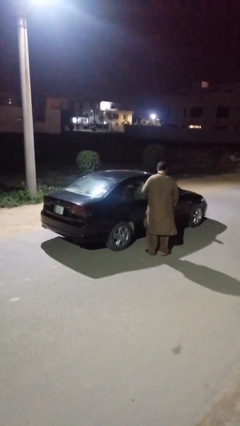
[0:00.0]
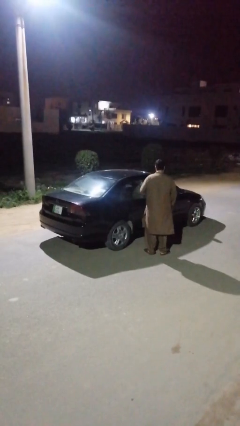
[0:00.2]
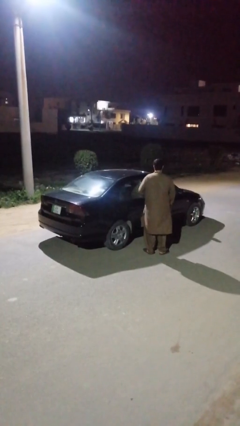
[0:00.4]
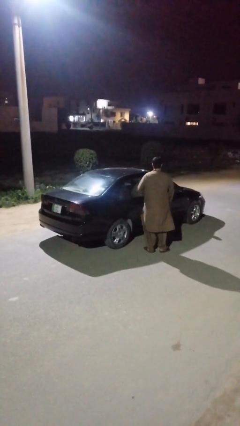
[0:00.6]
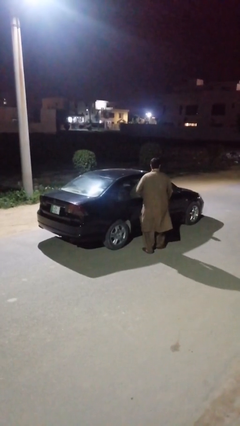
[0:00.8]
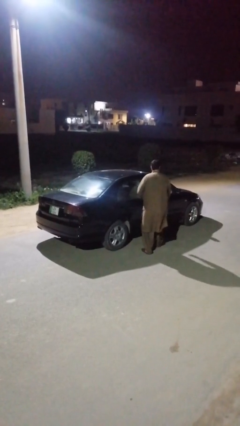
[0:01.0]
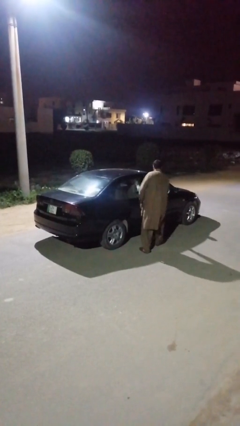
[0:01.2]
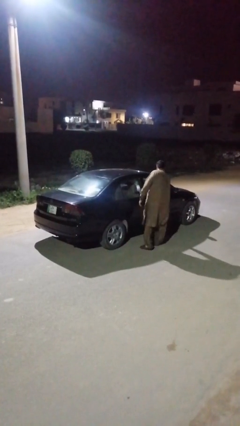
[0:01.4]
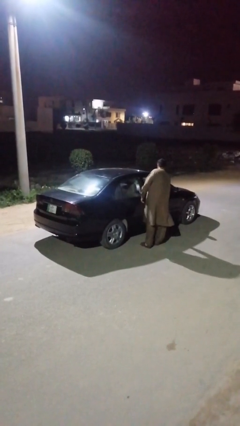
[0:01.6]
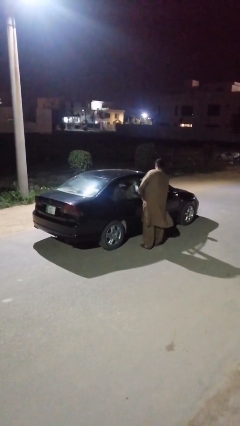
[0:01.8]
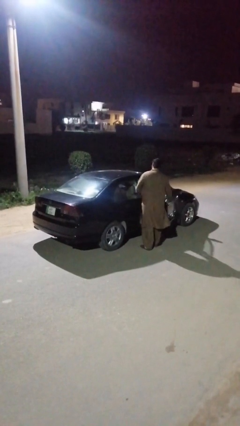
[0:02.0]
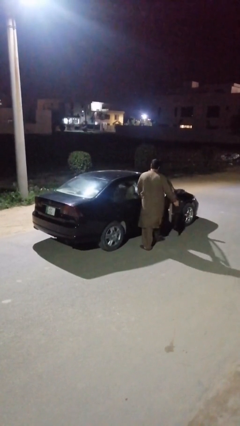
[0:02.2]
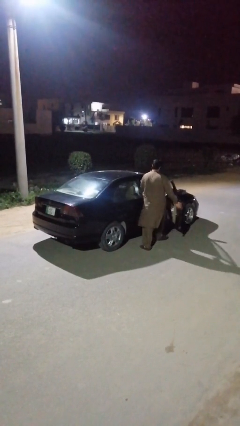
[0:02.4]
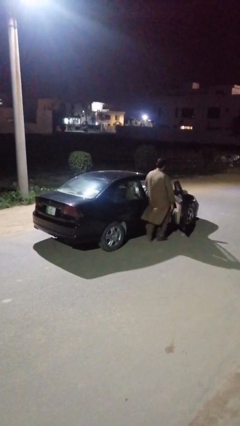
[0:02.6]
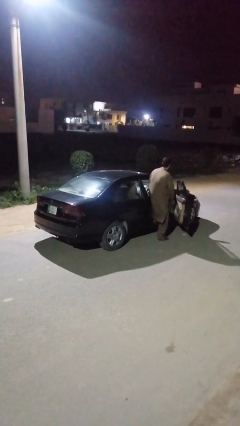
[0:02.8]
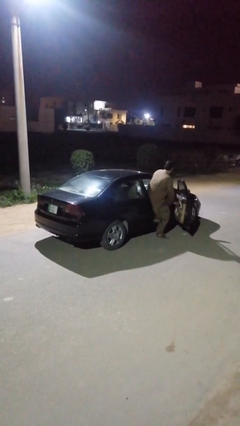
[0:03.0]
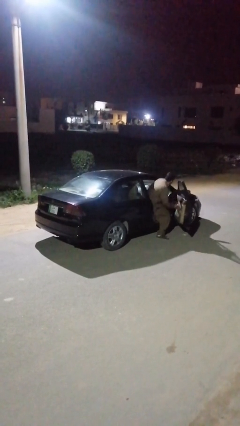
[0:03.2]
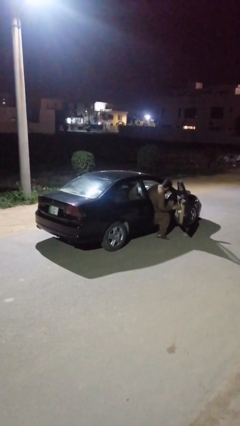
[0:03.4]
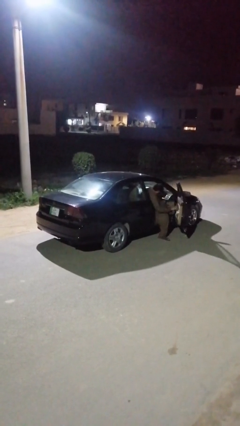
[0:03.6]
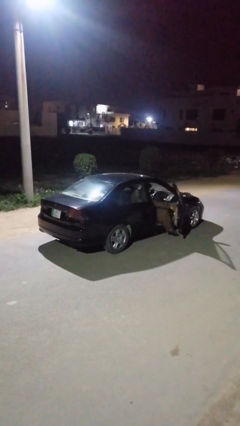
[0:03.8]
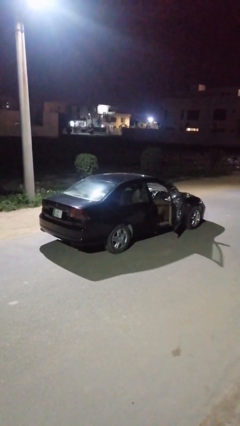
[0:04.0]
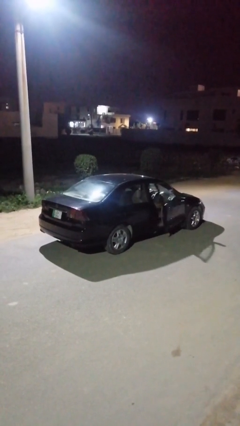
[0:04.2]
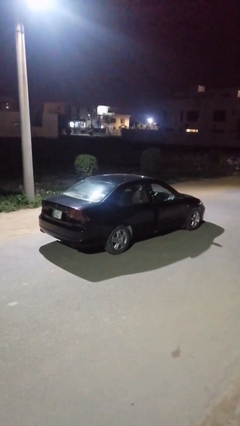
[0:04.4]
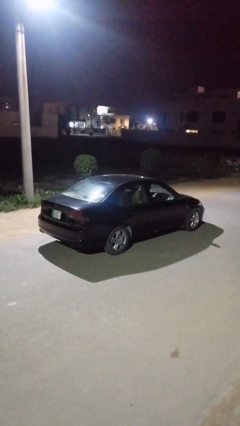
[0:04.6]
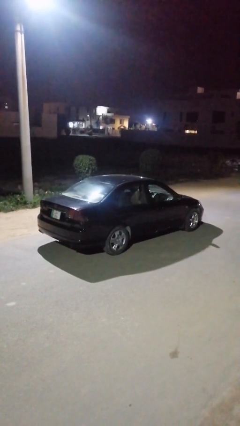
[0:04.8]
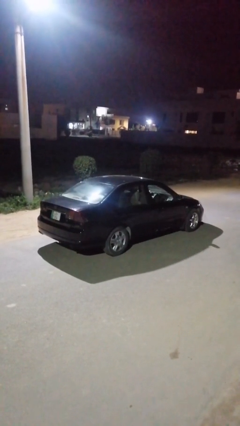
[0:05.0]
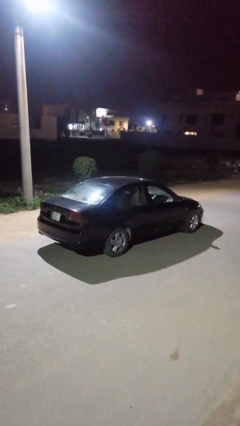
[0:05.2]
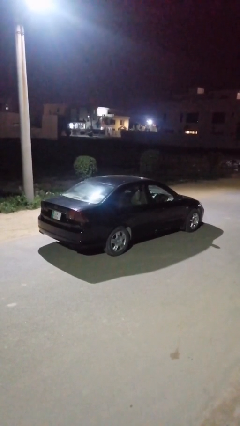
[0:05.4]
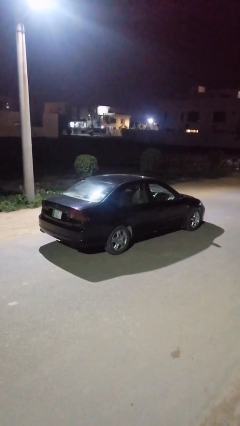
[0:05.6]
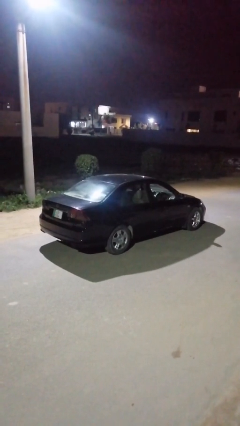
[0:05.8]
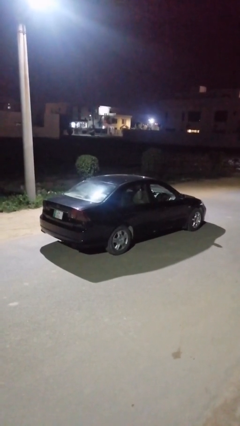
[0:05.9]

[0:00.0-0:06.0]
car picks up person

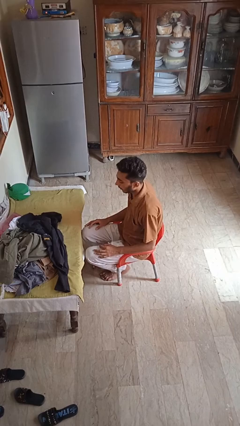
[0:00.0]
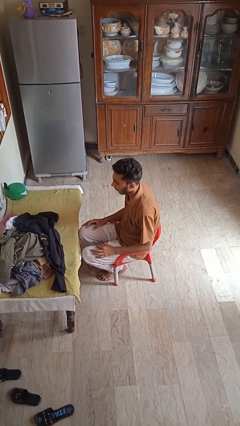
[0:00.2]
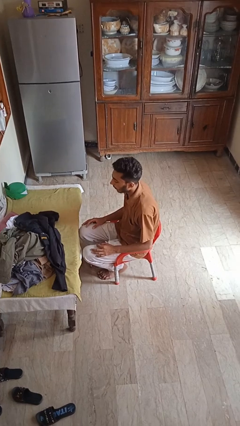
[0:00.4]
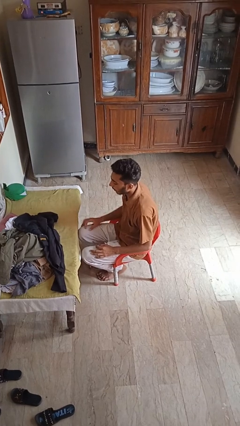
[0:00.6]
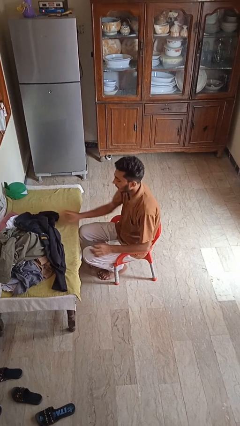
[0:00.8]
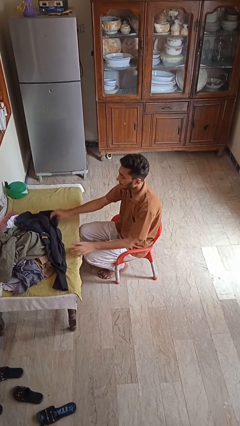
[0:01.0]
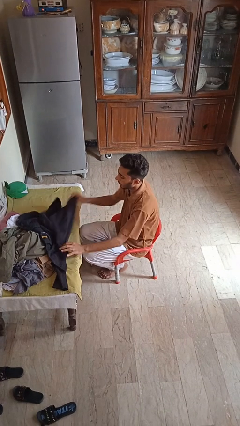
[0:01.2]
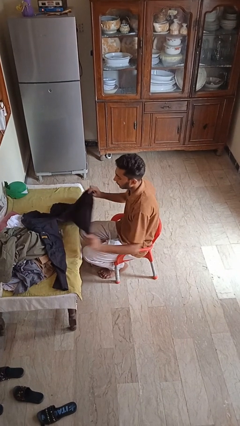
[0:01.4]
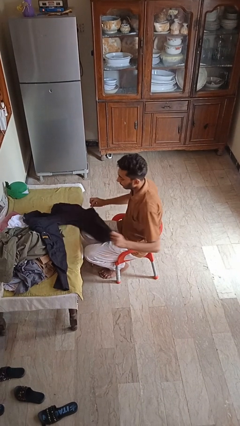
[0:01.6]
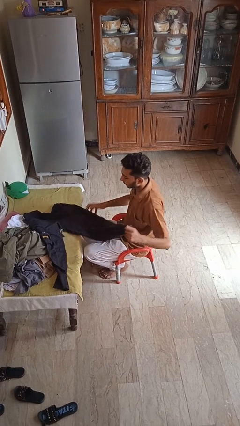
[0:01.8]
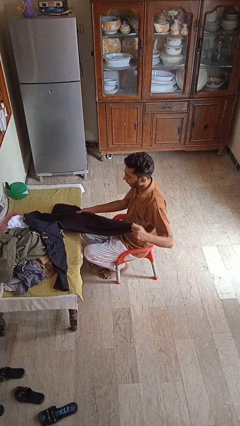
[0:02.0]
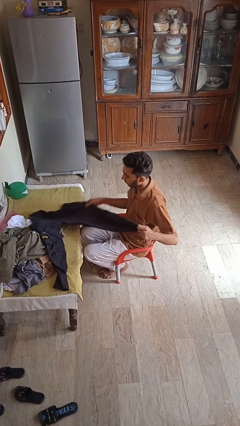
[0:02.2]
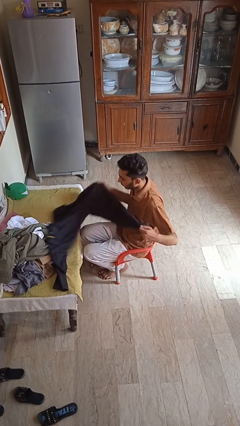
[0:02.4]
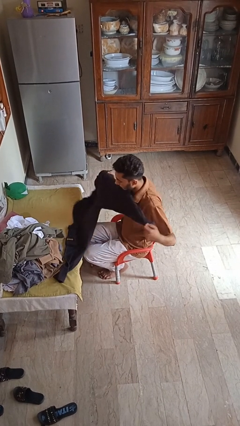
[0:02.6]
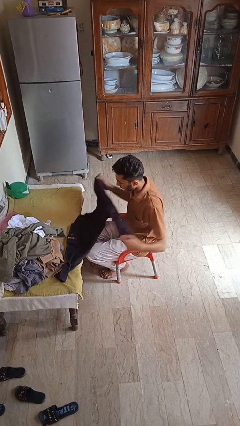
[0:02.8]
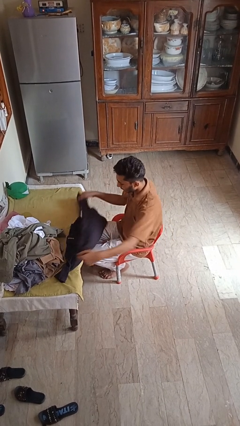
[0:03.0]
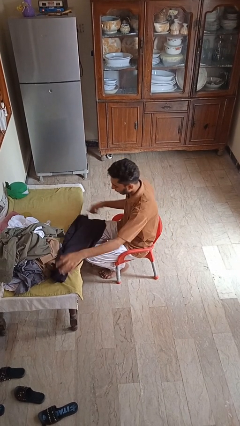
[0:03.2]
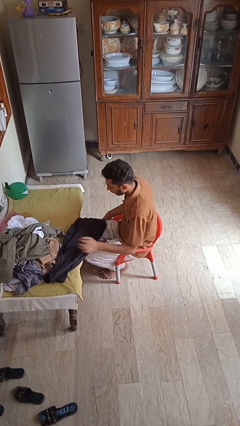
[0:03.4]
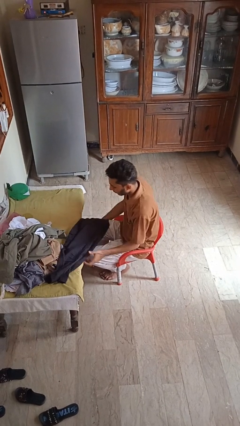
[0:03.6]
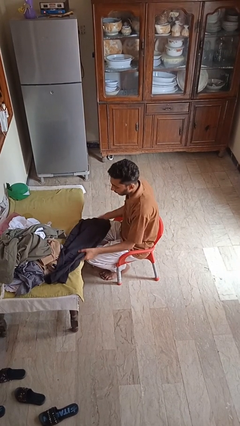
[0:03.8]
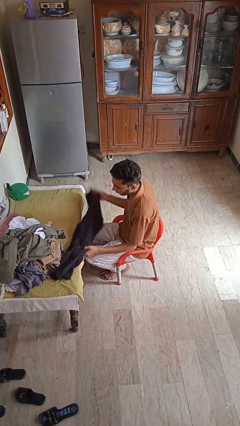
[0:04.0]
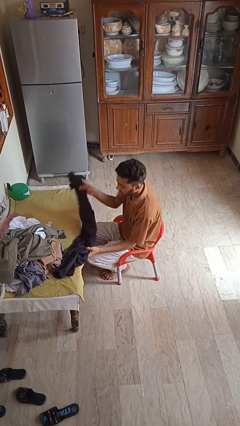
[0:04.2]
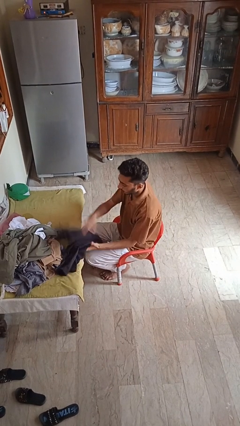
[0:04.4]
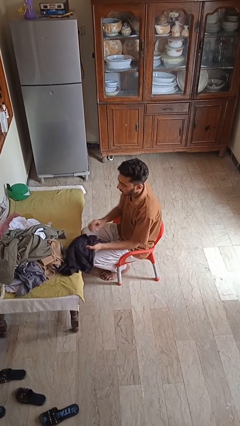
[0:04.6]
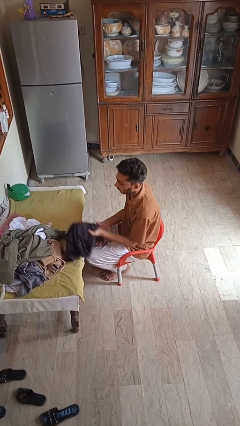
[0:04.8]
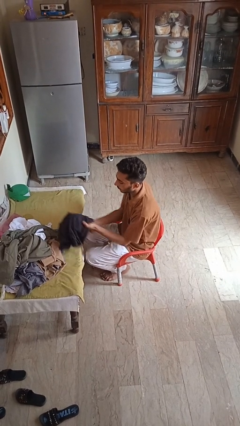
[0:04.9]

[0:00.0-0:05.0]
person folds pants

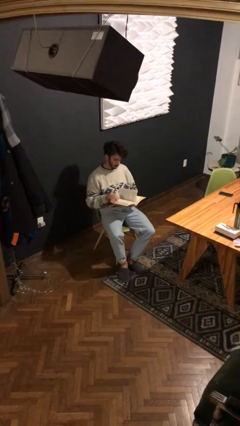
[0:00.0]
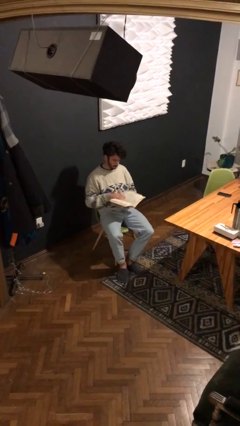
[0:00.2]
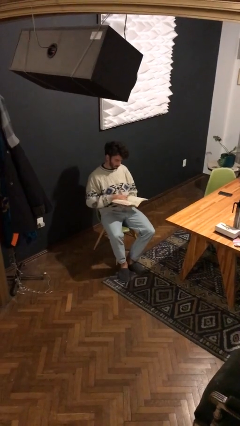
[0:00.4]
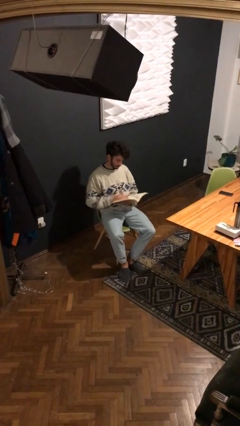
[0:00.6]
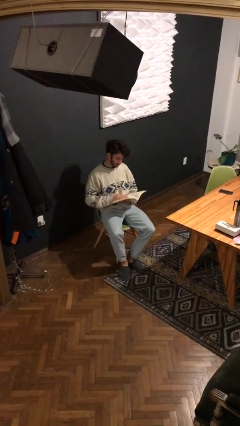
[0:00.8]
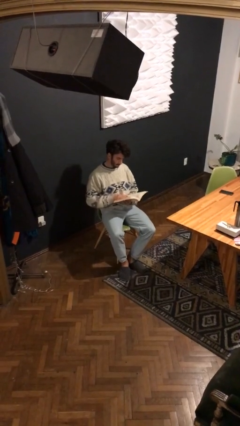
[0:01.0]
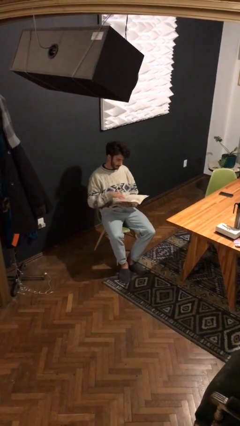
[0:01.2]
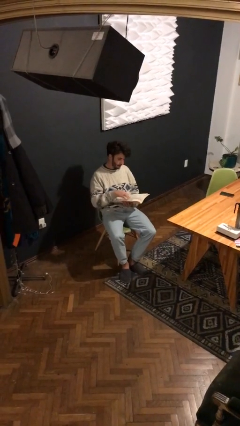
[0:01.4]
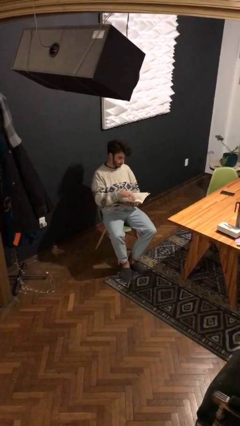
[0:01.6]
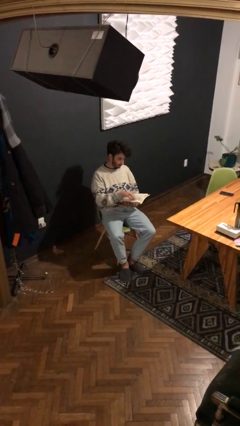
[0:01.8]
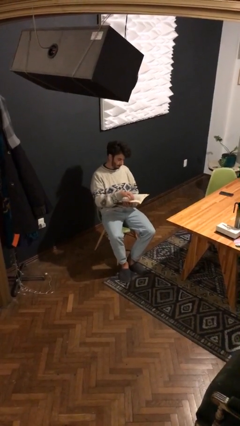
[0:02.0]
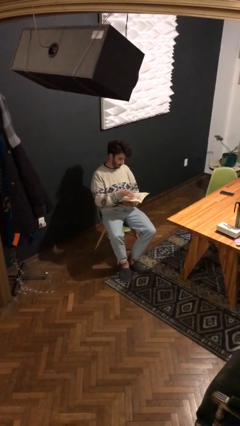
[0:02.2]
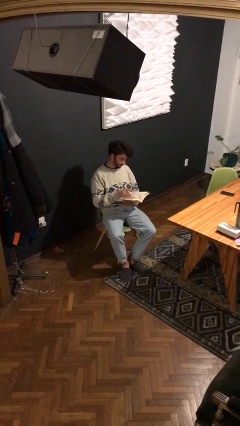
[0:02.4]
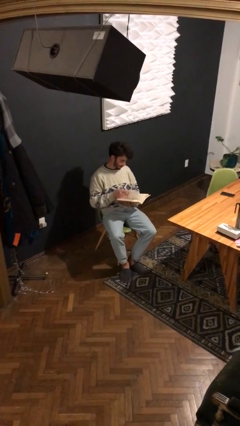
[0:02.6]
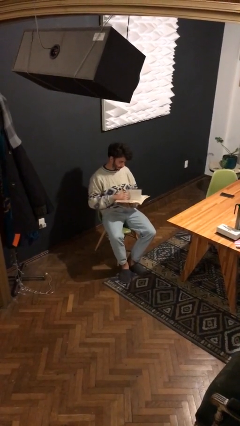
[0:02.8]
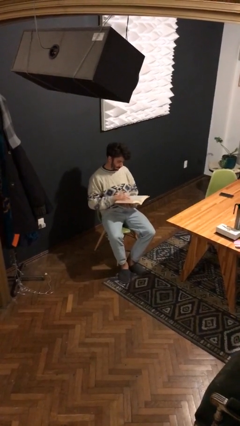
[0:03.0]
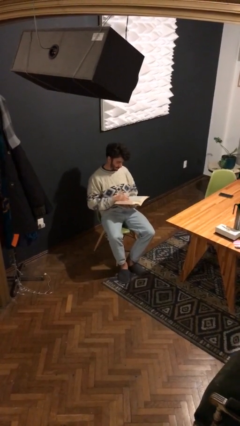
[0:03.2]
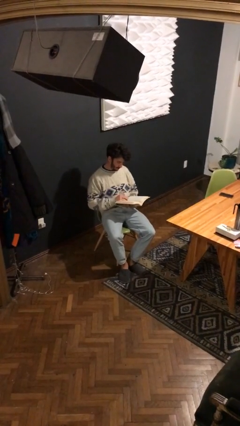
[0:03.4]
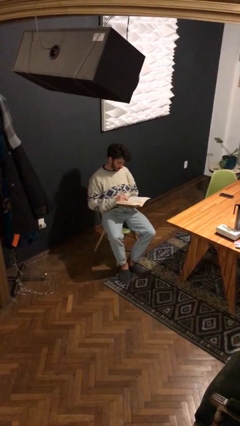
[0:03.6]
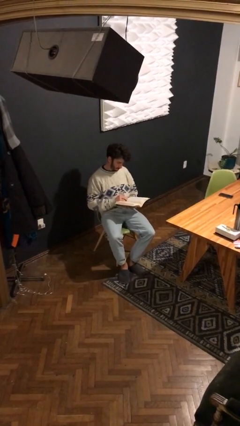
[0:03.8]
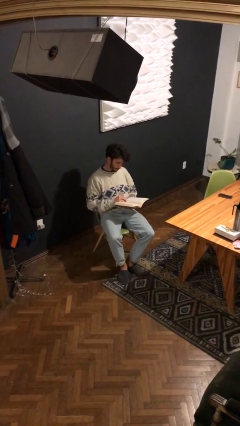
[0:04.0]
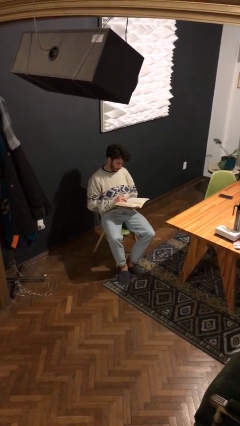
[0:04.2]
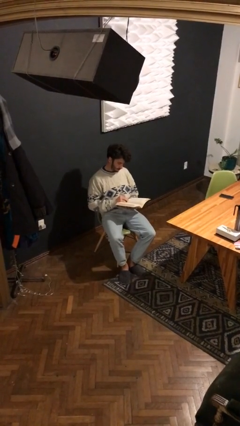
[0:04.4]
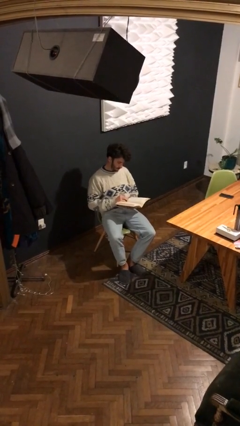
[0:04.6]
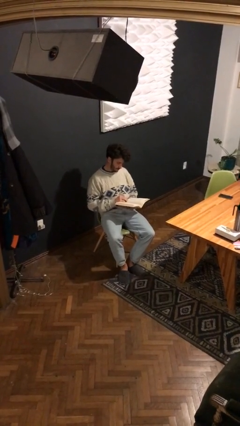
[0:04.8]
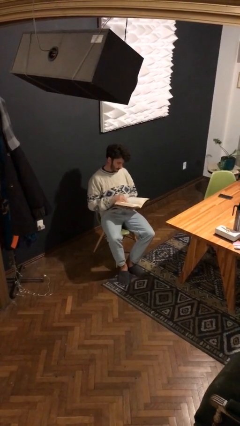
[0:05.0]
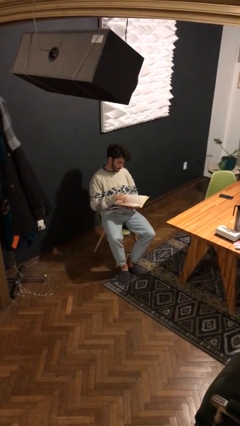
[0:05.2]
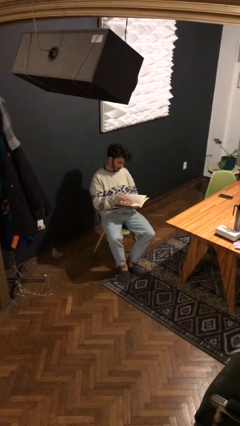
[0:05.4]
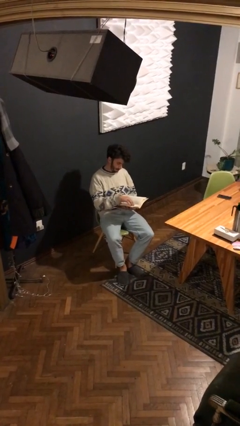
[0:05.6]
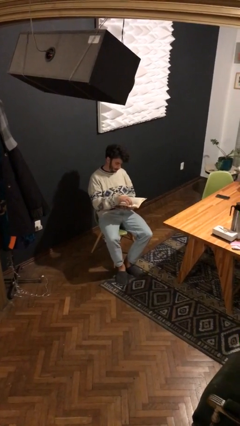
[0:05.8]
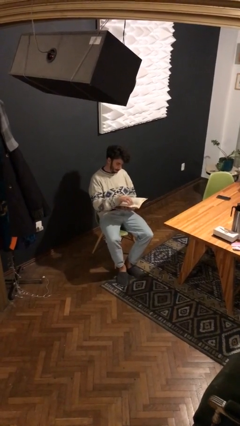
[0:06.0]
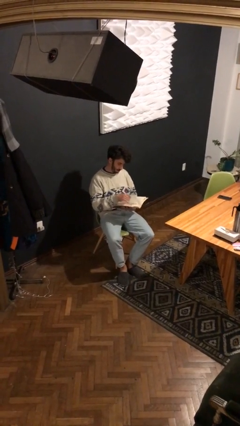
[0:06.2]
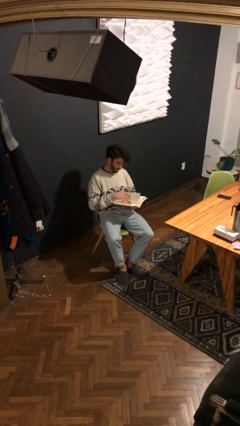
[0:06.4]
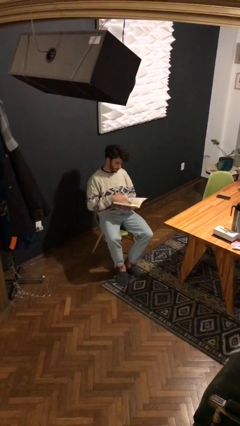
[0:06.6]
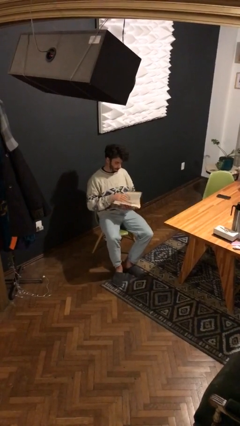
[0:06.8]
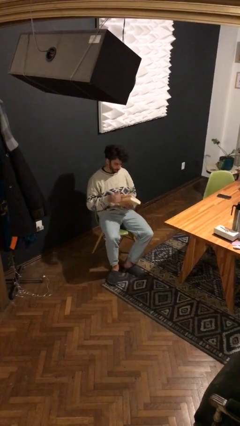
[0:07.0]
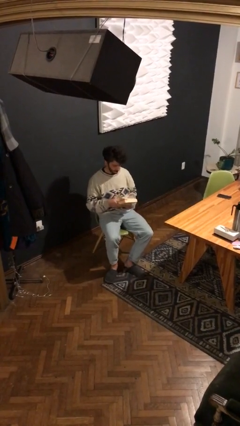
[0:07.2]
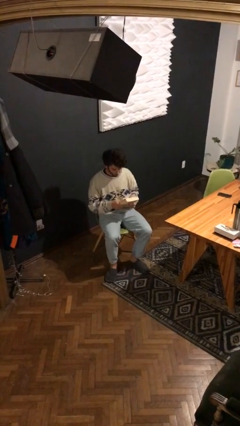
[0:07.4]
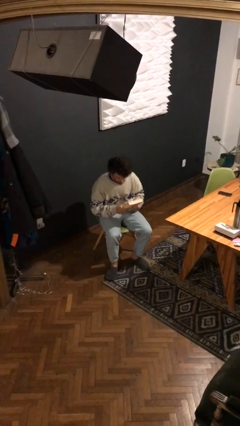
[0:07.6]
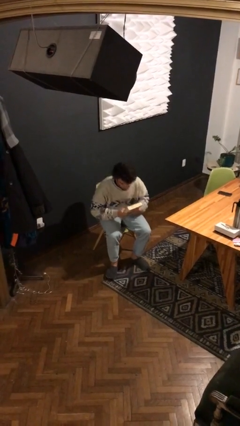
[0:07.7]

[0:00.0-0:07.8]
person reads document
